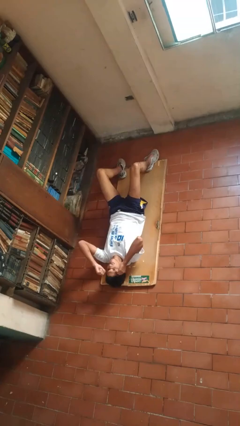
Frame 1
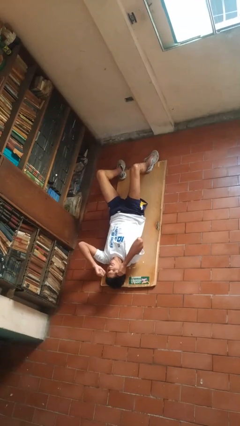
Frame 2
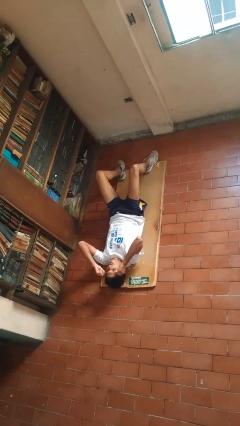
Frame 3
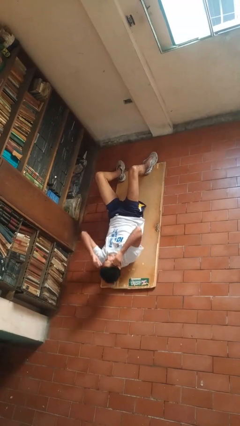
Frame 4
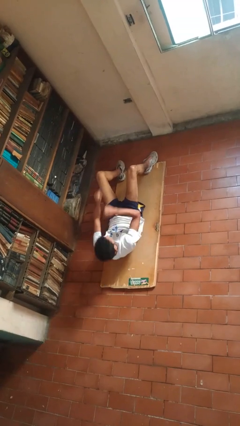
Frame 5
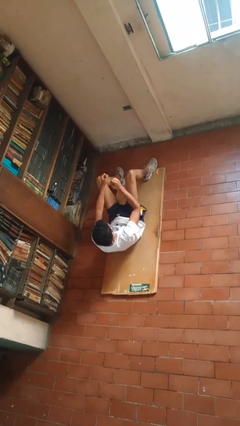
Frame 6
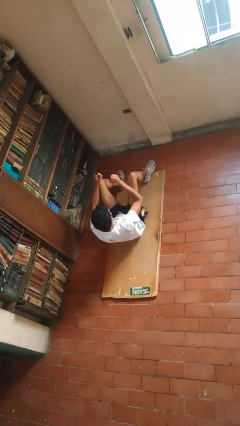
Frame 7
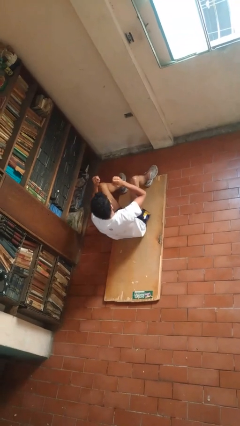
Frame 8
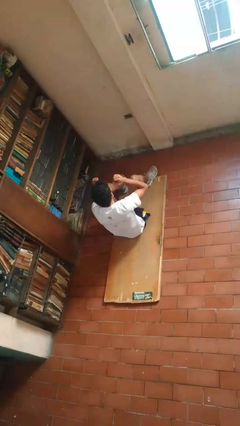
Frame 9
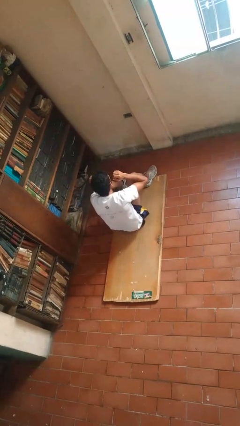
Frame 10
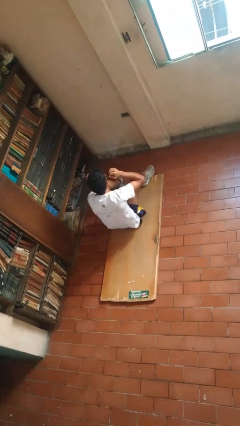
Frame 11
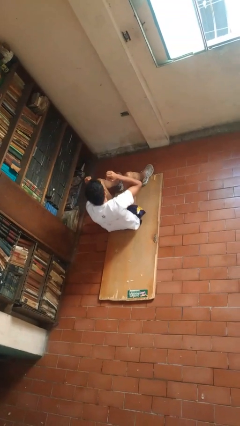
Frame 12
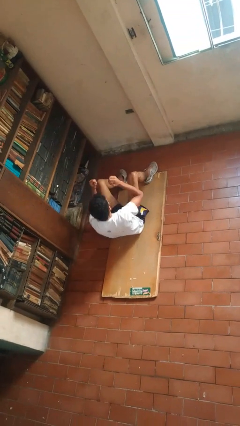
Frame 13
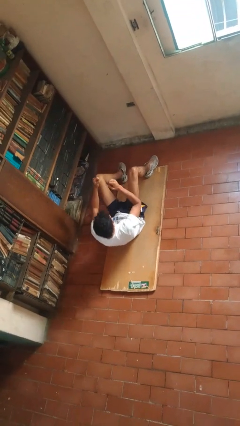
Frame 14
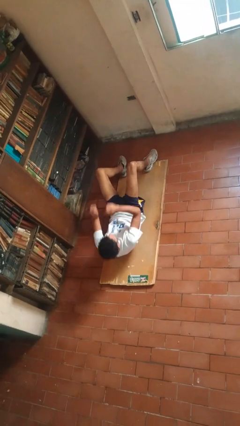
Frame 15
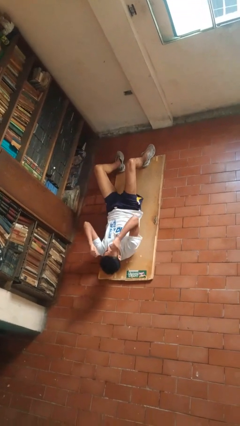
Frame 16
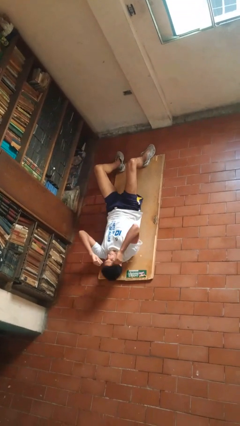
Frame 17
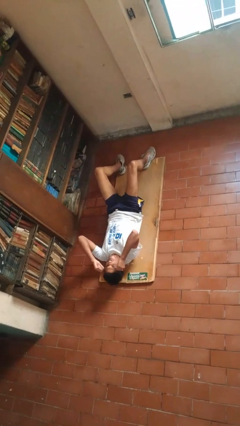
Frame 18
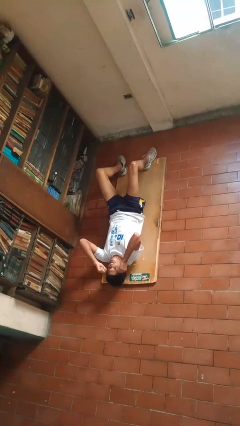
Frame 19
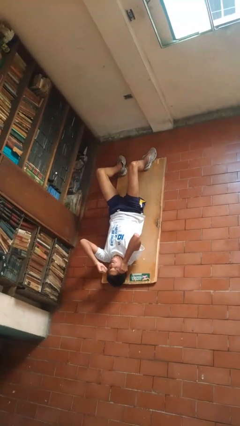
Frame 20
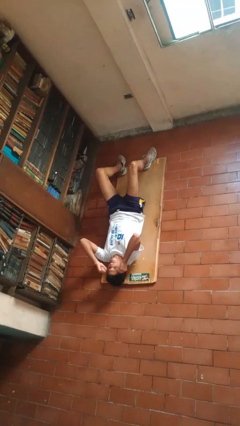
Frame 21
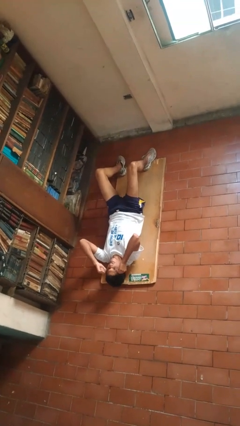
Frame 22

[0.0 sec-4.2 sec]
person exercises with situp

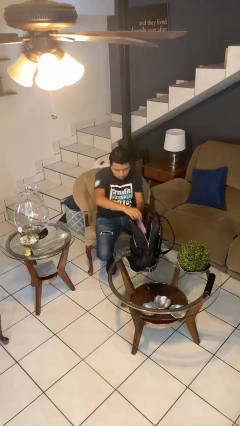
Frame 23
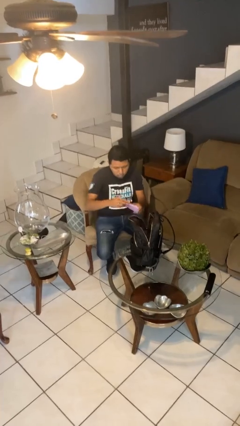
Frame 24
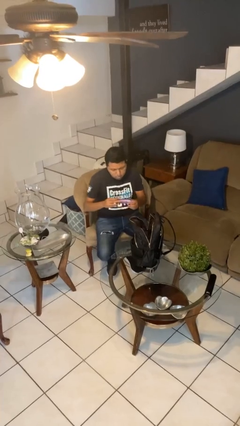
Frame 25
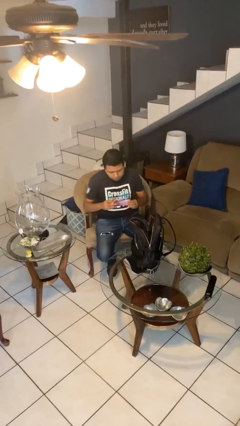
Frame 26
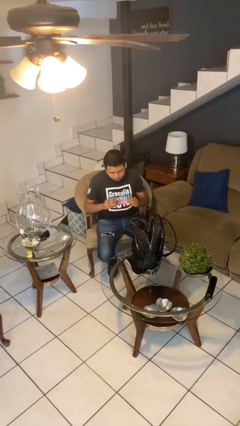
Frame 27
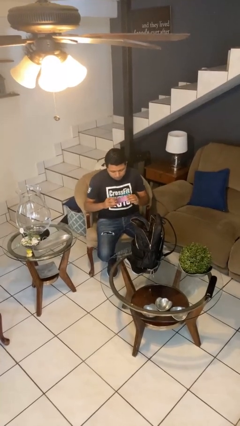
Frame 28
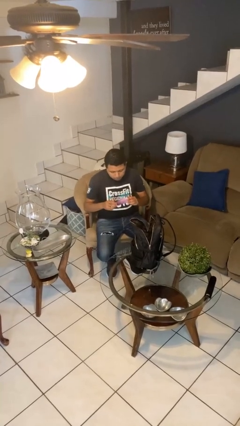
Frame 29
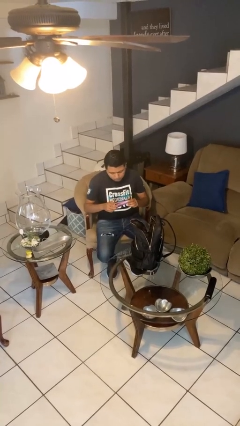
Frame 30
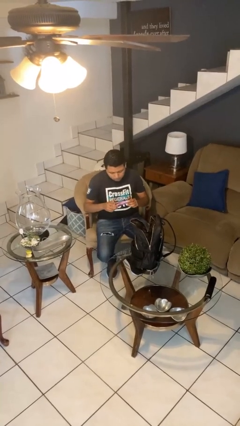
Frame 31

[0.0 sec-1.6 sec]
person takes object from backpack

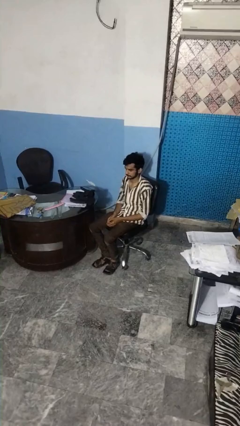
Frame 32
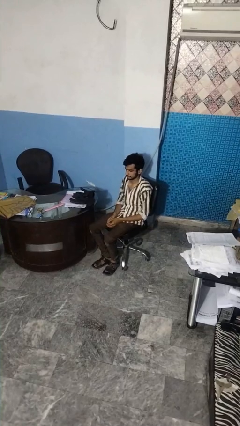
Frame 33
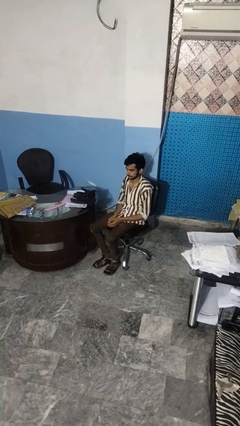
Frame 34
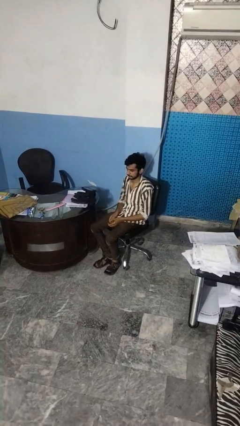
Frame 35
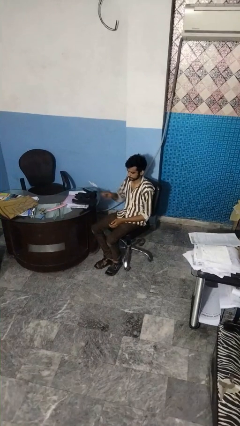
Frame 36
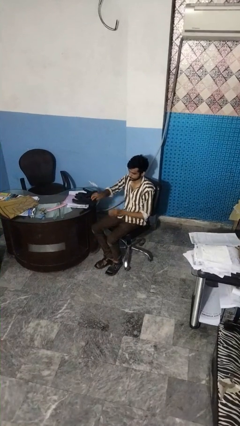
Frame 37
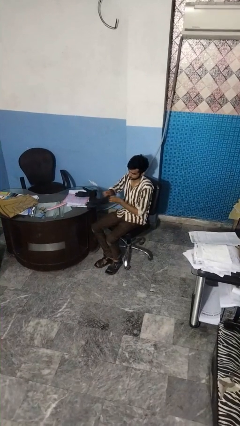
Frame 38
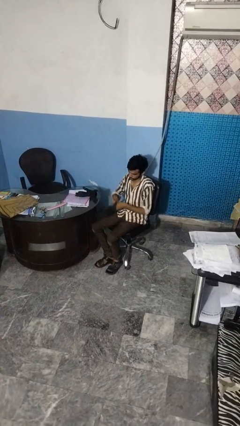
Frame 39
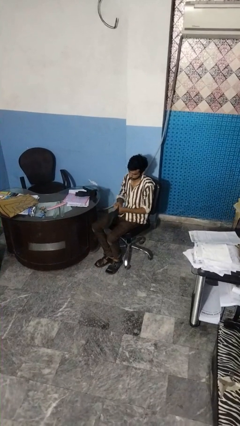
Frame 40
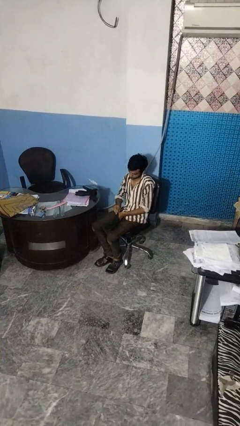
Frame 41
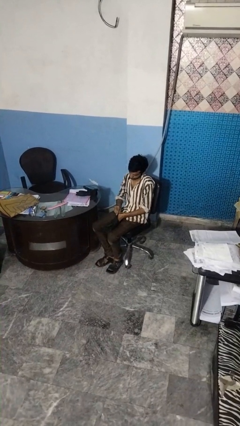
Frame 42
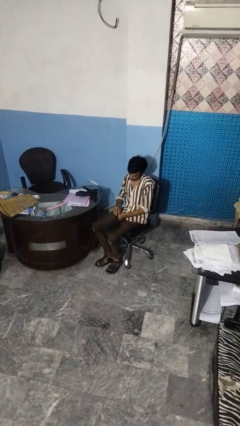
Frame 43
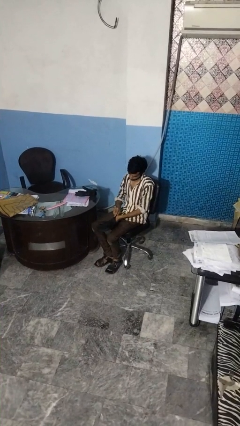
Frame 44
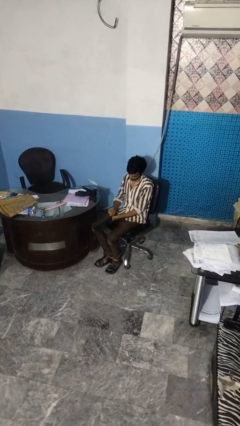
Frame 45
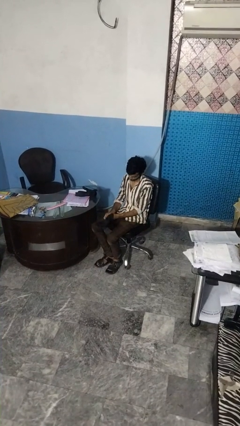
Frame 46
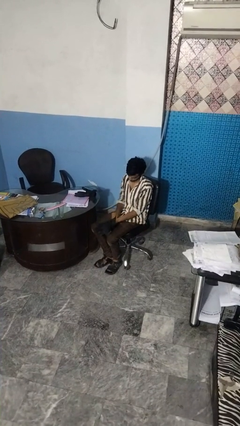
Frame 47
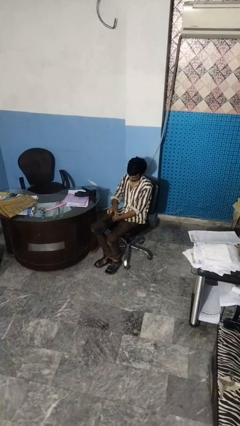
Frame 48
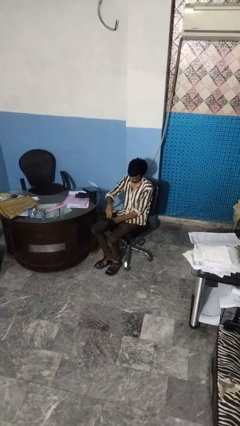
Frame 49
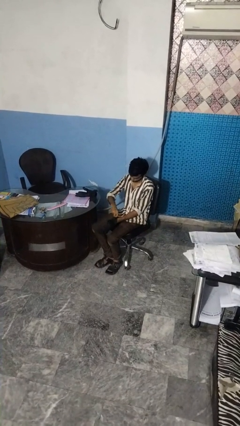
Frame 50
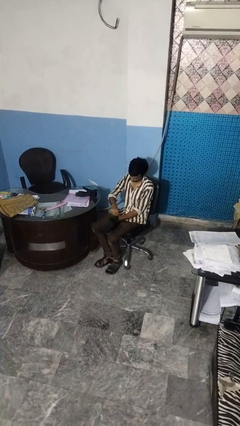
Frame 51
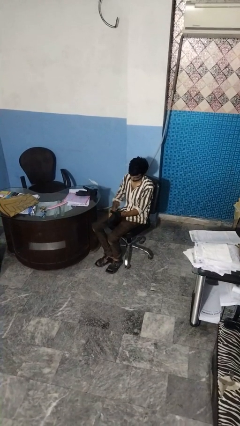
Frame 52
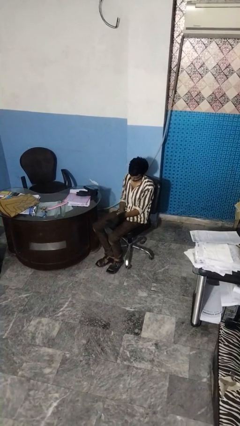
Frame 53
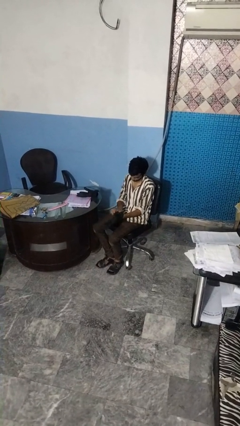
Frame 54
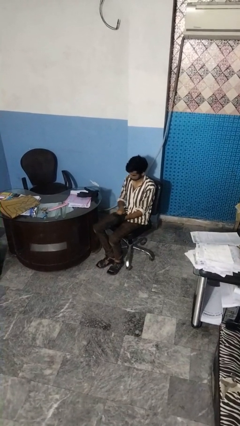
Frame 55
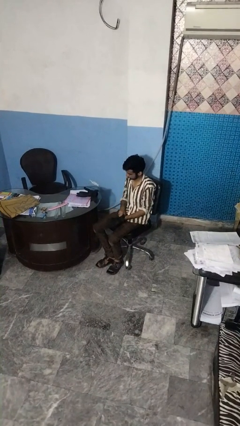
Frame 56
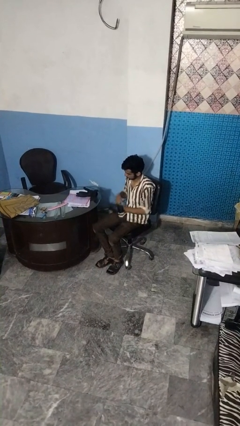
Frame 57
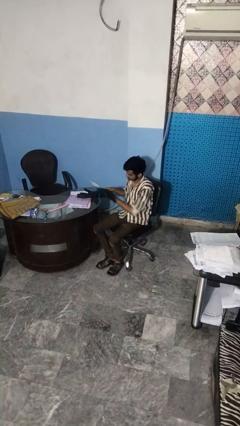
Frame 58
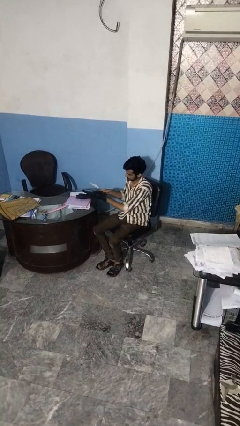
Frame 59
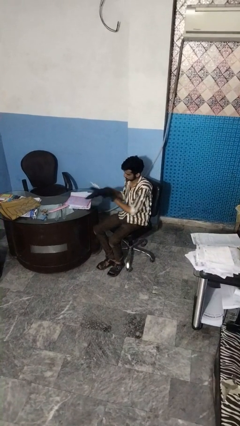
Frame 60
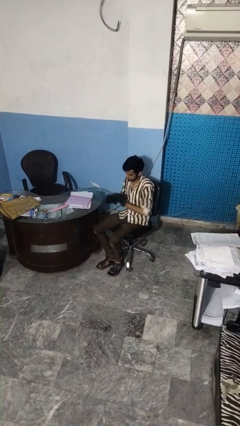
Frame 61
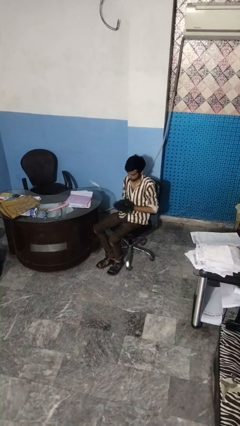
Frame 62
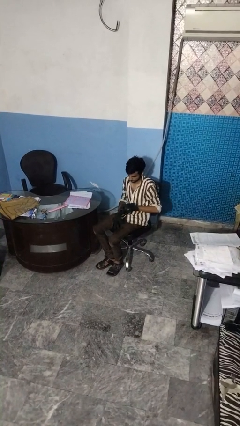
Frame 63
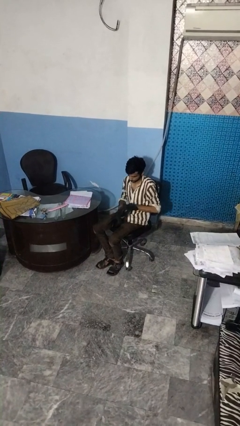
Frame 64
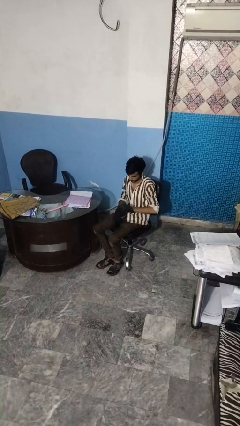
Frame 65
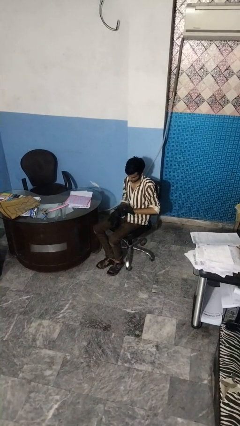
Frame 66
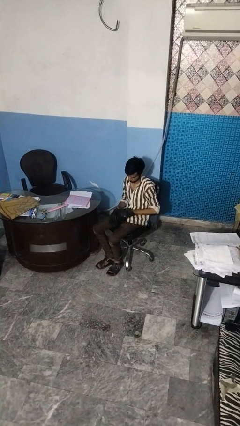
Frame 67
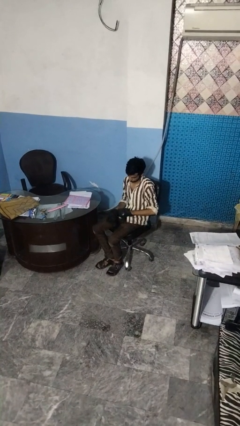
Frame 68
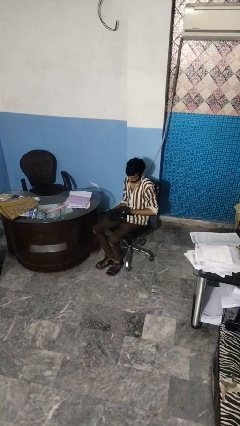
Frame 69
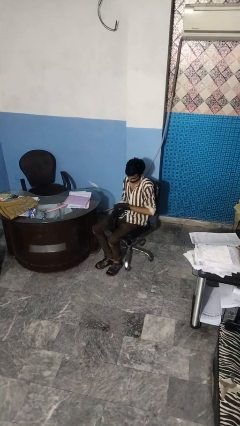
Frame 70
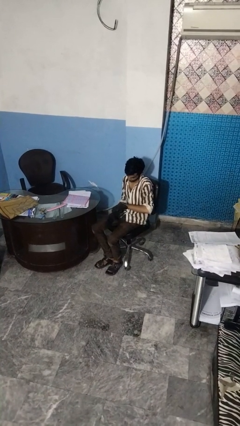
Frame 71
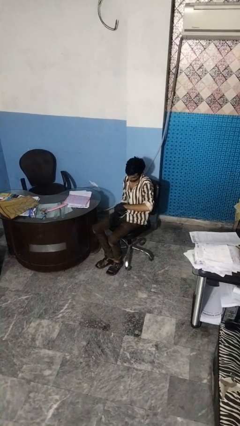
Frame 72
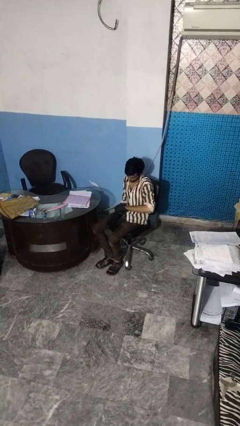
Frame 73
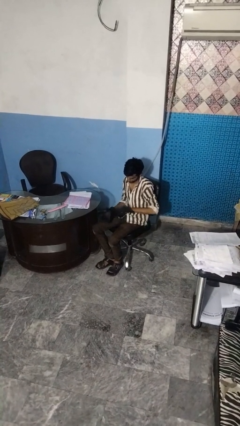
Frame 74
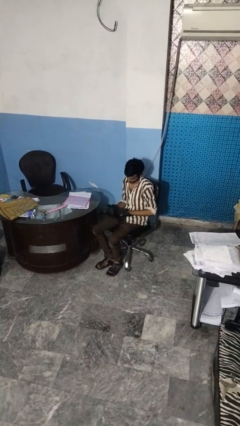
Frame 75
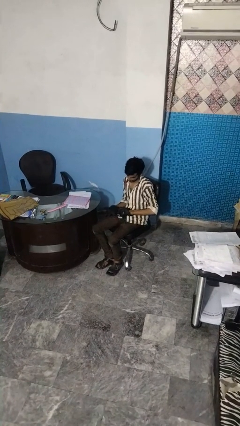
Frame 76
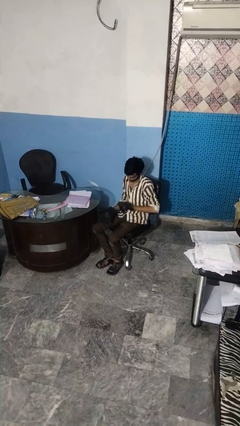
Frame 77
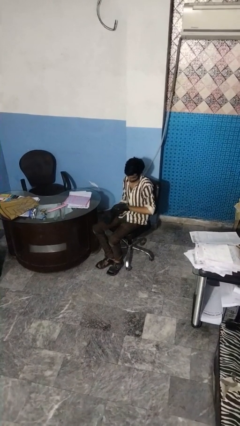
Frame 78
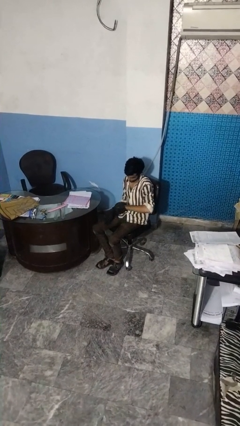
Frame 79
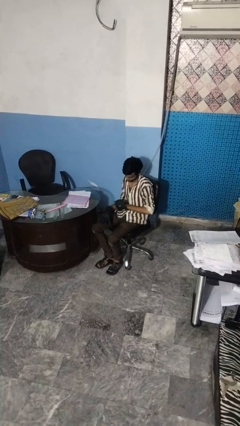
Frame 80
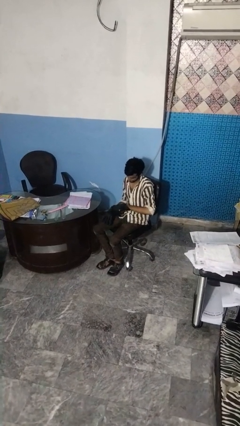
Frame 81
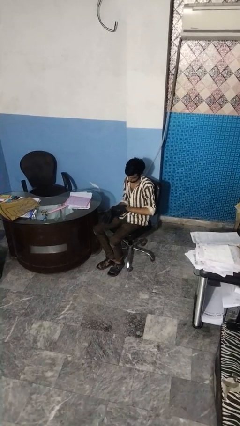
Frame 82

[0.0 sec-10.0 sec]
person puts on gloves

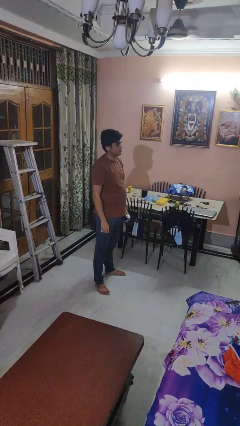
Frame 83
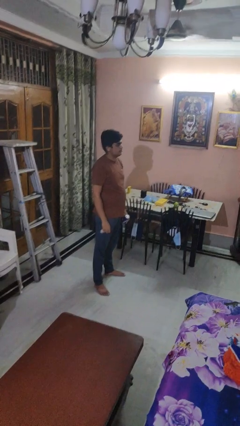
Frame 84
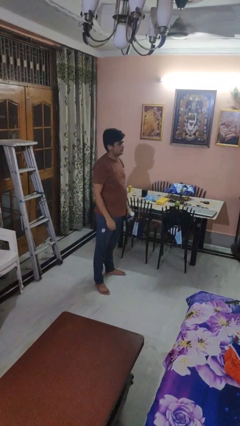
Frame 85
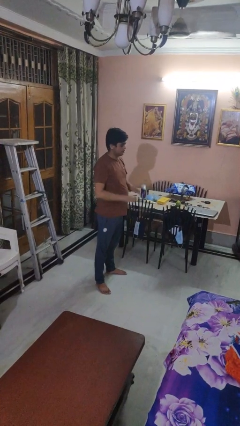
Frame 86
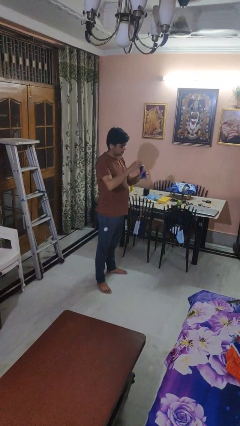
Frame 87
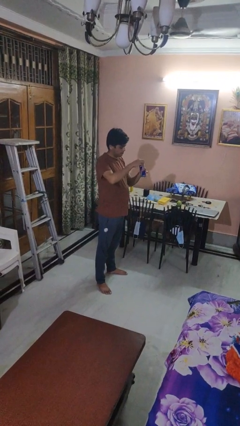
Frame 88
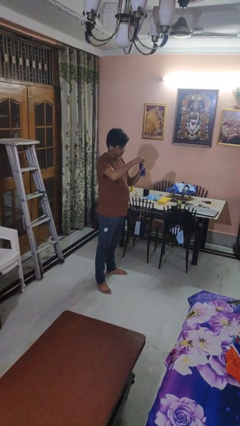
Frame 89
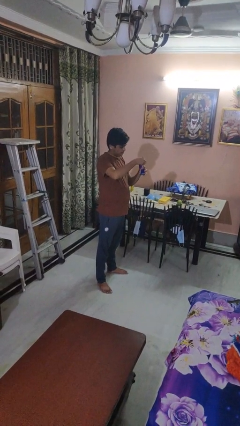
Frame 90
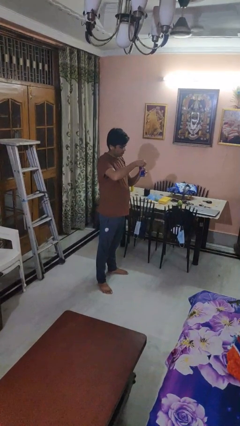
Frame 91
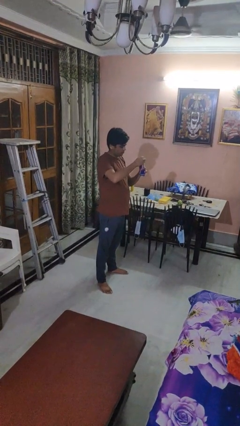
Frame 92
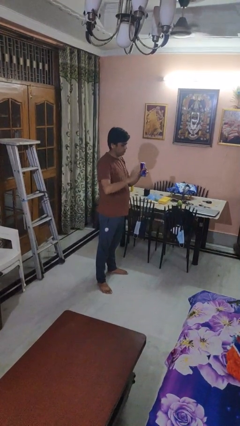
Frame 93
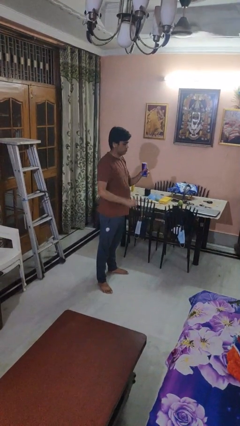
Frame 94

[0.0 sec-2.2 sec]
person opens beverage can
